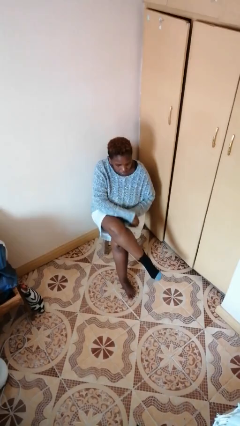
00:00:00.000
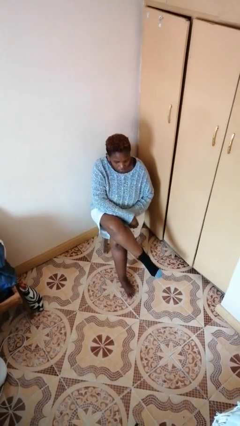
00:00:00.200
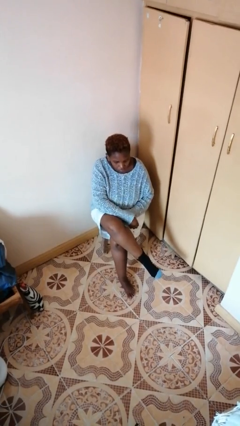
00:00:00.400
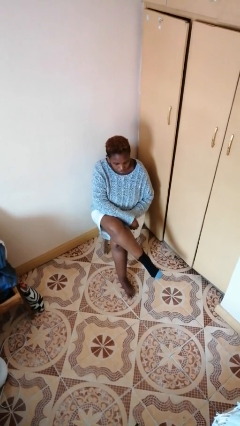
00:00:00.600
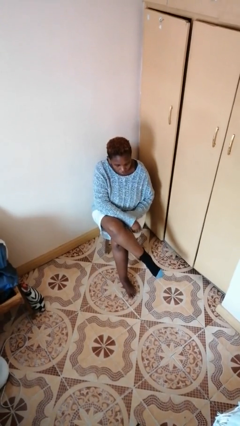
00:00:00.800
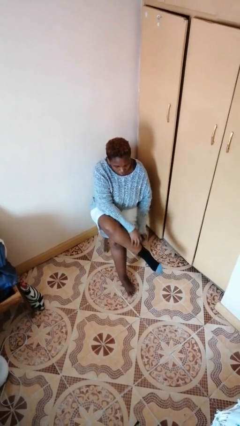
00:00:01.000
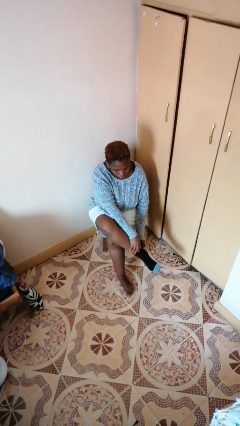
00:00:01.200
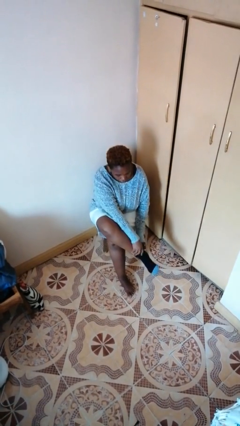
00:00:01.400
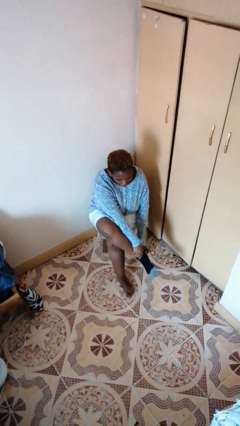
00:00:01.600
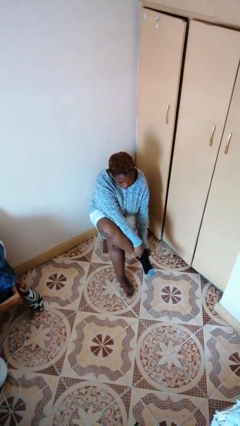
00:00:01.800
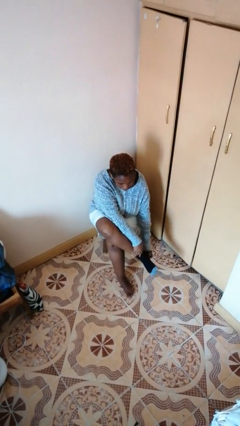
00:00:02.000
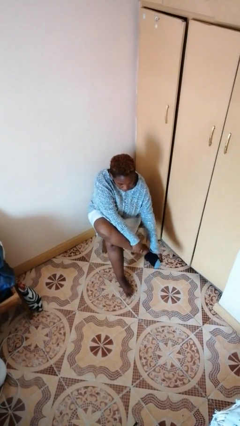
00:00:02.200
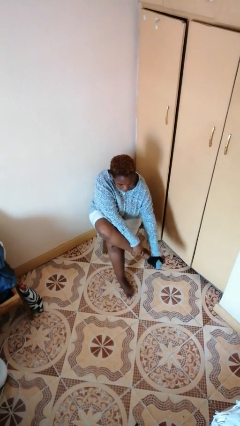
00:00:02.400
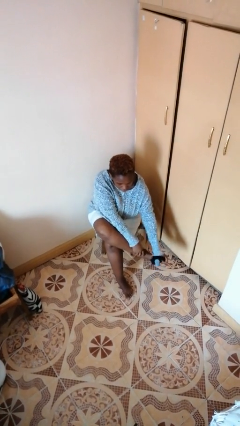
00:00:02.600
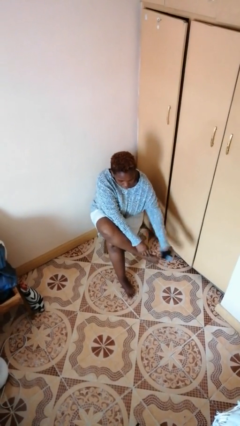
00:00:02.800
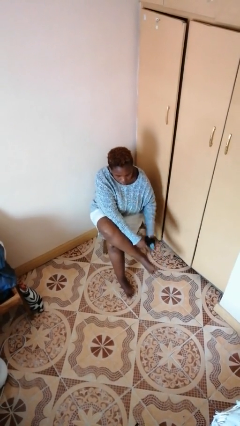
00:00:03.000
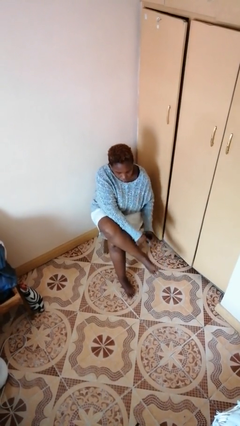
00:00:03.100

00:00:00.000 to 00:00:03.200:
person takes off socks

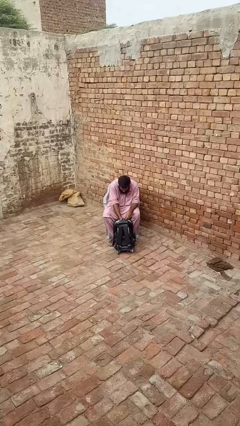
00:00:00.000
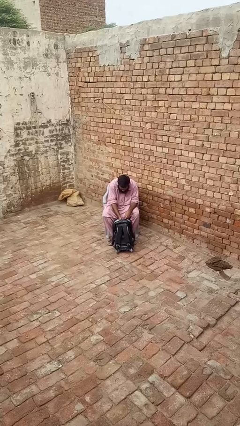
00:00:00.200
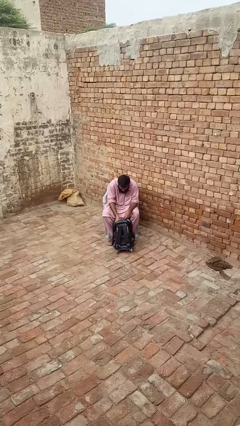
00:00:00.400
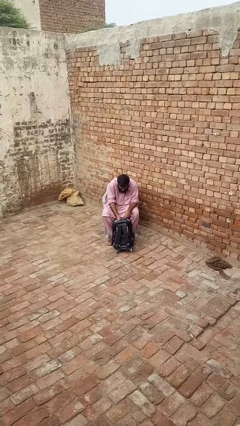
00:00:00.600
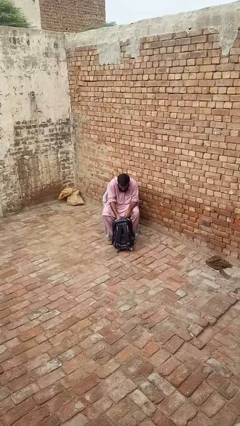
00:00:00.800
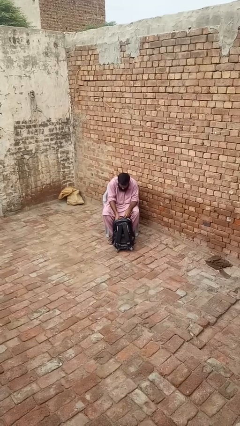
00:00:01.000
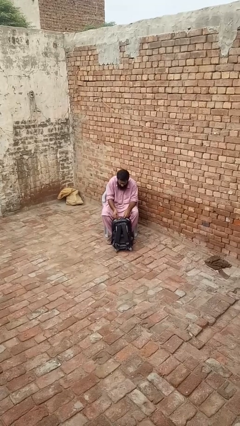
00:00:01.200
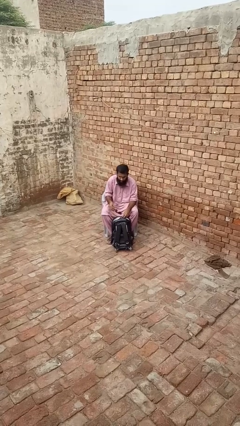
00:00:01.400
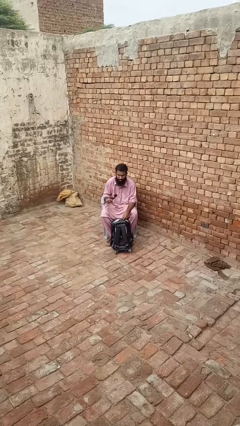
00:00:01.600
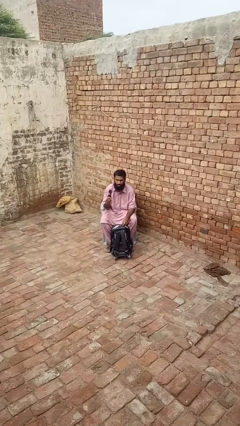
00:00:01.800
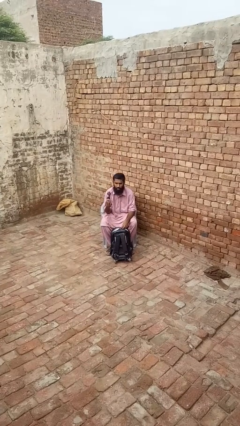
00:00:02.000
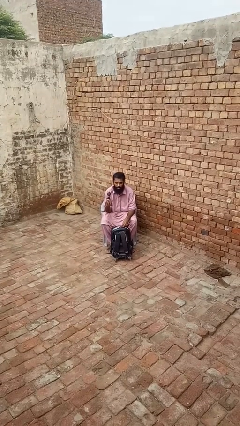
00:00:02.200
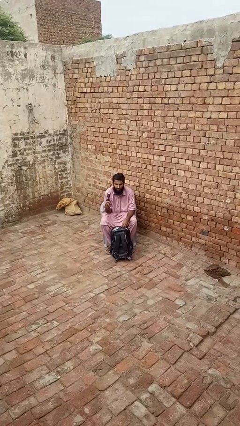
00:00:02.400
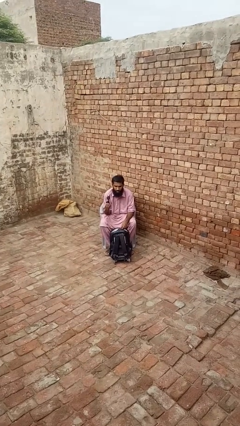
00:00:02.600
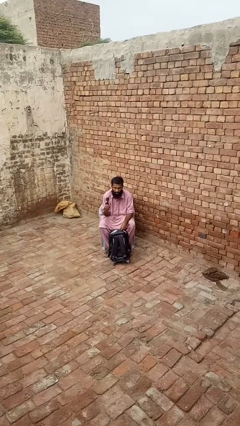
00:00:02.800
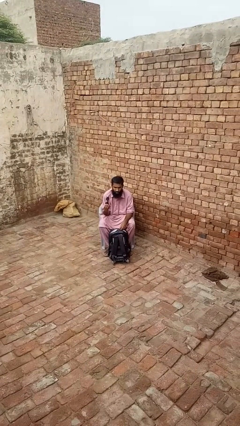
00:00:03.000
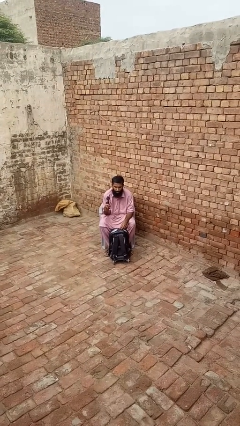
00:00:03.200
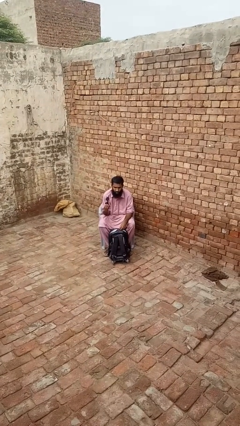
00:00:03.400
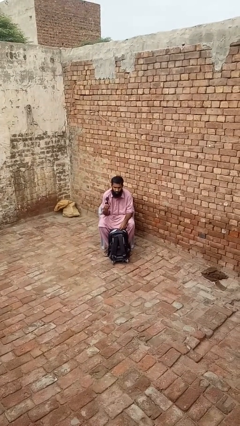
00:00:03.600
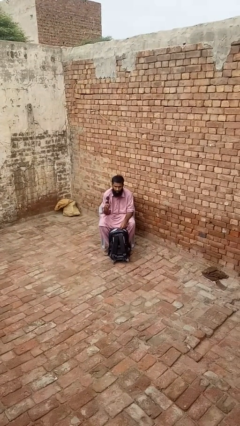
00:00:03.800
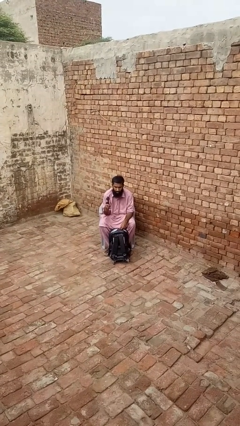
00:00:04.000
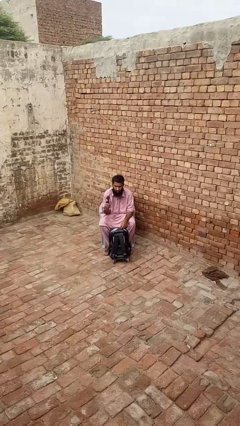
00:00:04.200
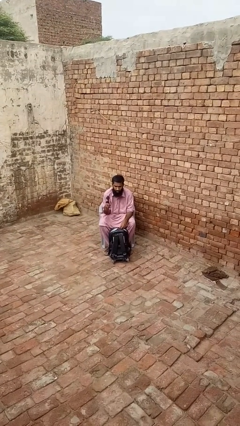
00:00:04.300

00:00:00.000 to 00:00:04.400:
person takes object from backpack

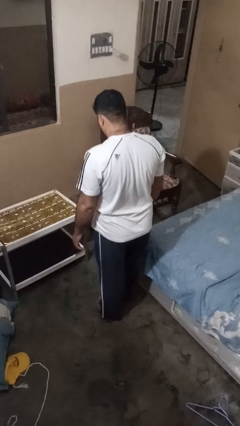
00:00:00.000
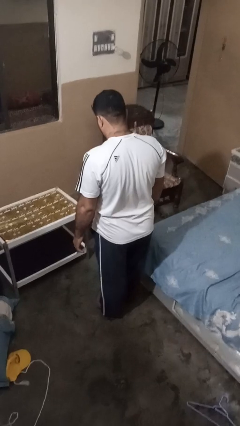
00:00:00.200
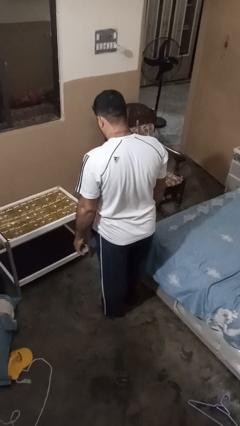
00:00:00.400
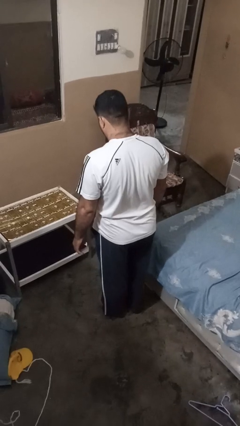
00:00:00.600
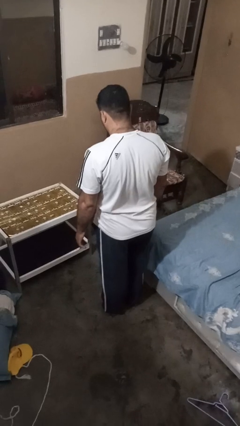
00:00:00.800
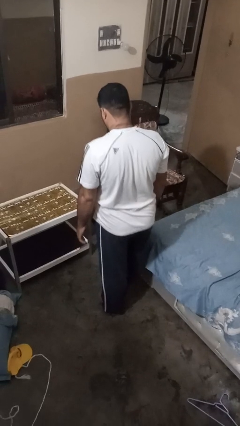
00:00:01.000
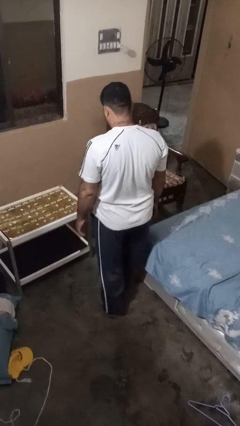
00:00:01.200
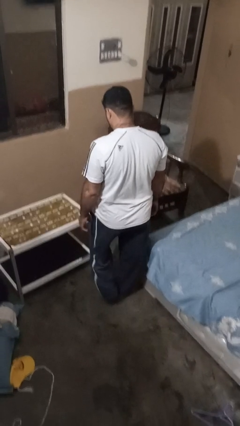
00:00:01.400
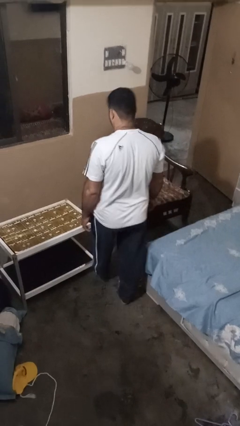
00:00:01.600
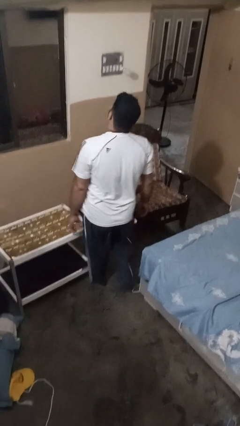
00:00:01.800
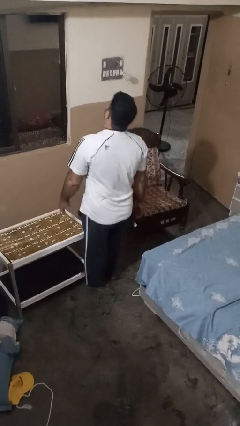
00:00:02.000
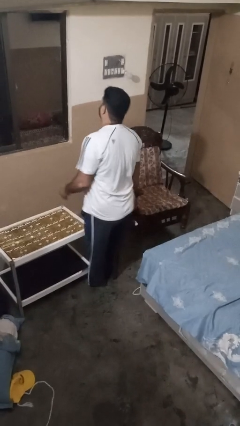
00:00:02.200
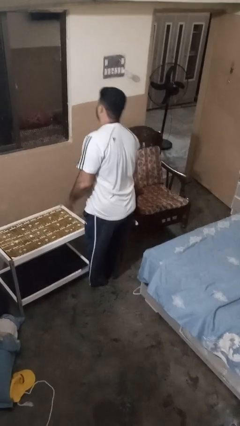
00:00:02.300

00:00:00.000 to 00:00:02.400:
person bumps into table

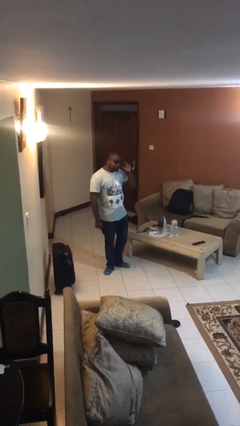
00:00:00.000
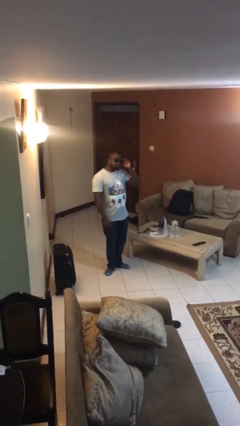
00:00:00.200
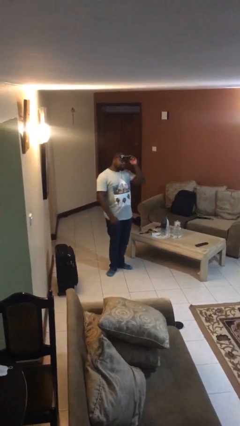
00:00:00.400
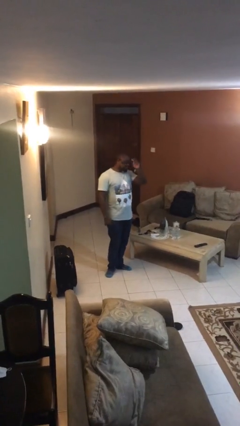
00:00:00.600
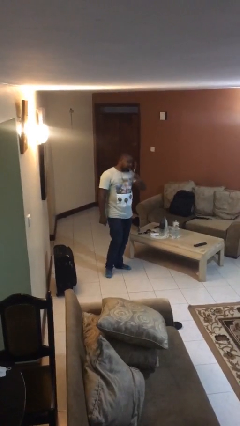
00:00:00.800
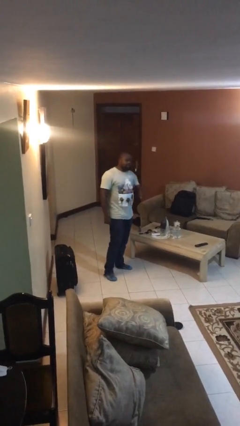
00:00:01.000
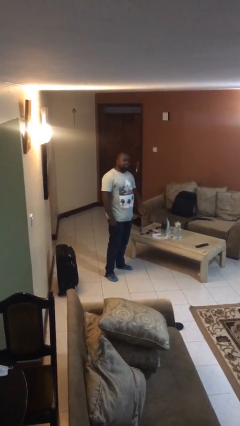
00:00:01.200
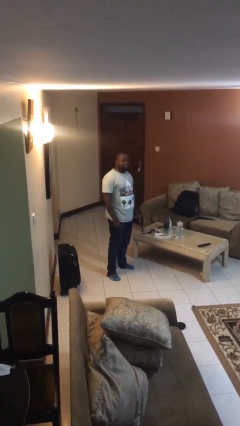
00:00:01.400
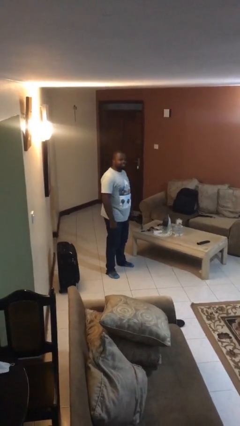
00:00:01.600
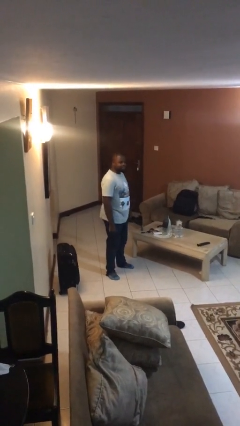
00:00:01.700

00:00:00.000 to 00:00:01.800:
person takes off sunglasses

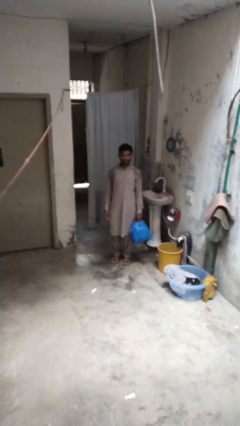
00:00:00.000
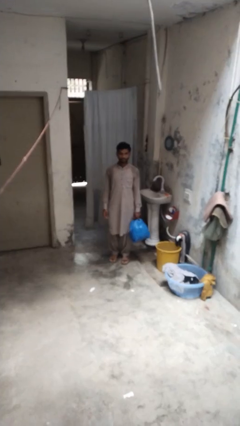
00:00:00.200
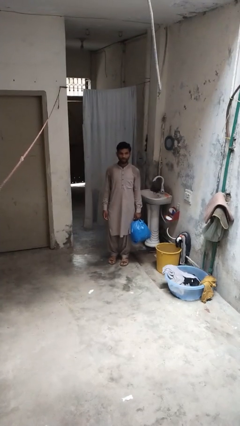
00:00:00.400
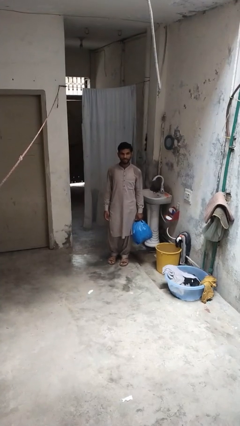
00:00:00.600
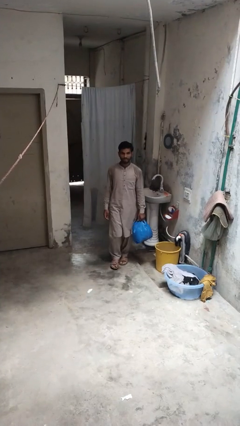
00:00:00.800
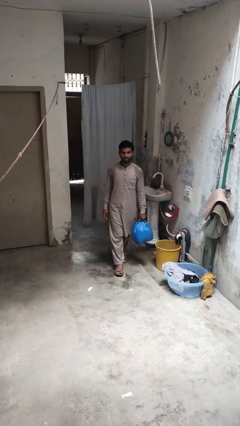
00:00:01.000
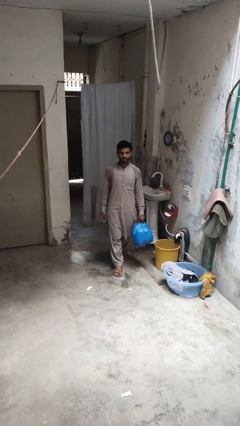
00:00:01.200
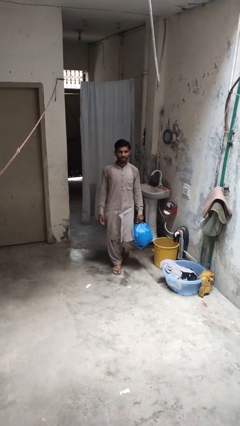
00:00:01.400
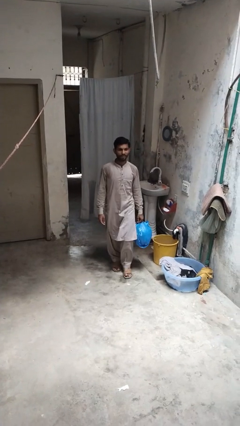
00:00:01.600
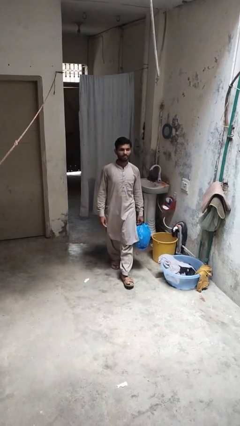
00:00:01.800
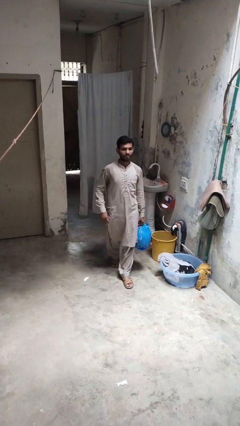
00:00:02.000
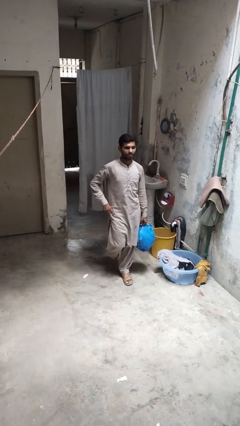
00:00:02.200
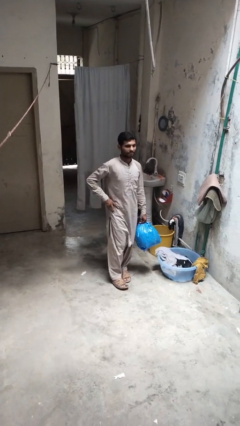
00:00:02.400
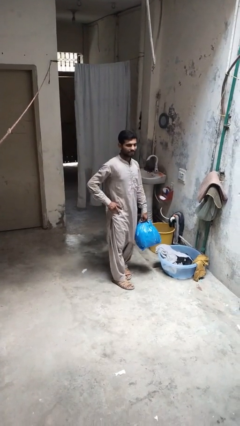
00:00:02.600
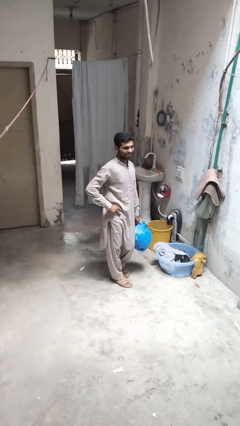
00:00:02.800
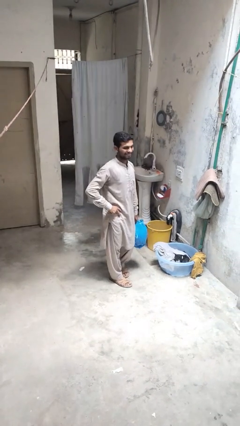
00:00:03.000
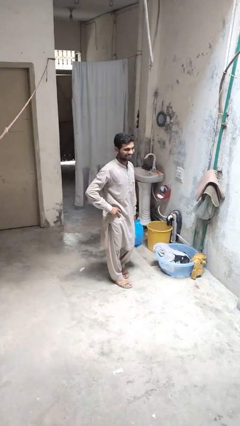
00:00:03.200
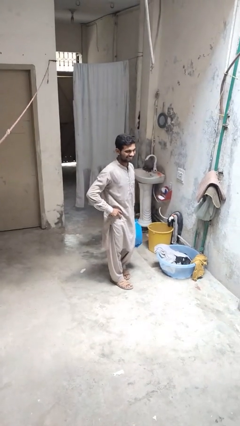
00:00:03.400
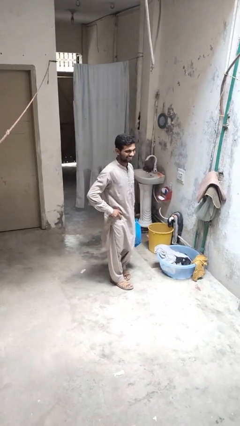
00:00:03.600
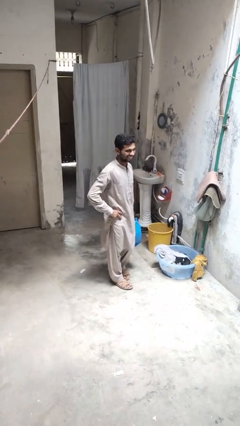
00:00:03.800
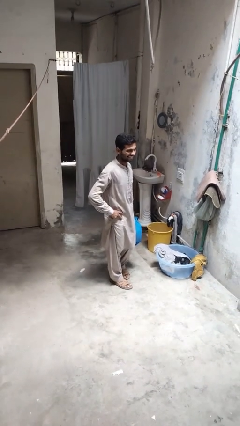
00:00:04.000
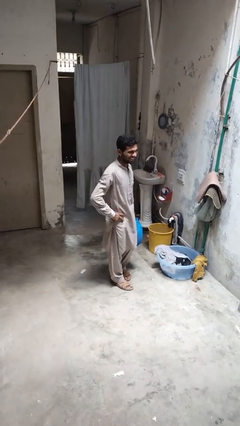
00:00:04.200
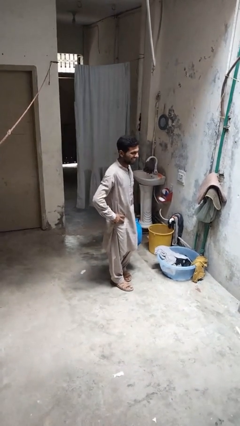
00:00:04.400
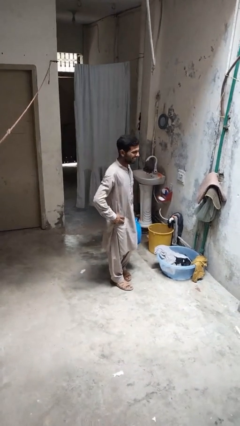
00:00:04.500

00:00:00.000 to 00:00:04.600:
person carries groceries

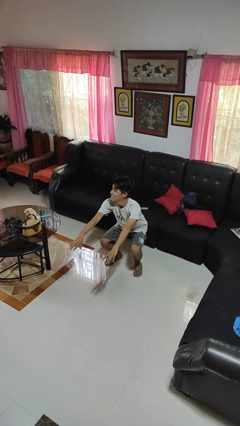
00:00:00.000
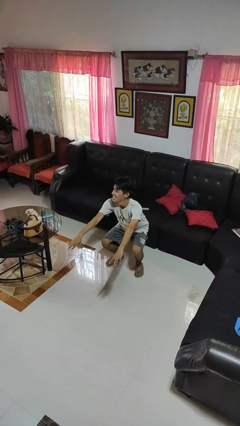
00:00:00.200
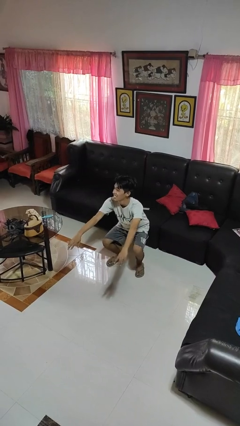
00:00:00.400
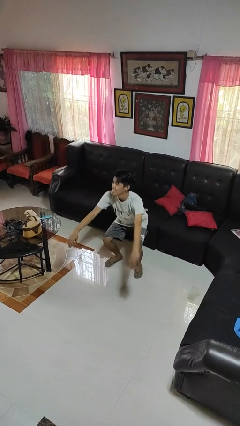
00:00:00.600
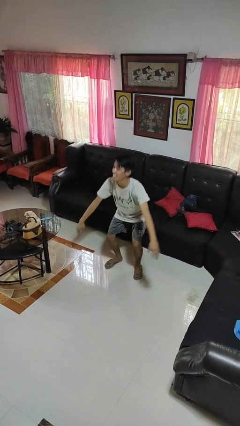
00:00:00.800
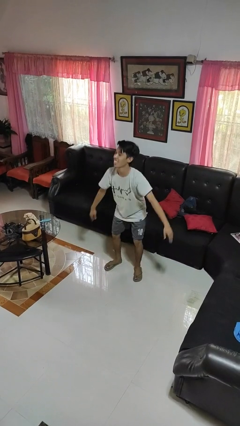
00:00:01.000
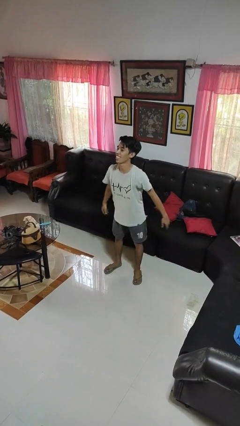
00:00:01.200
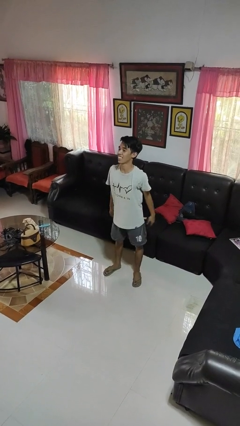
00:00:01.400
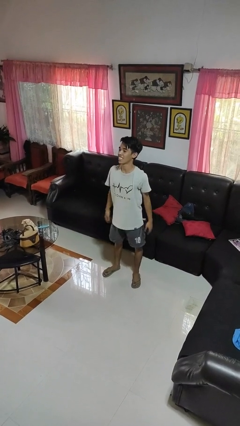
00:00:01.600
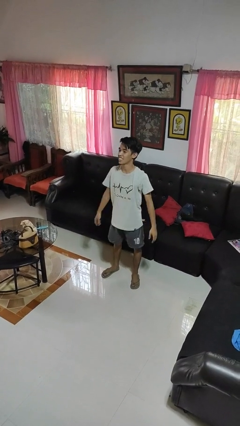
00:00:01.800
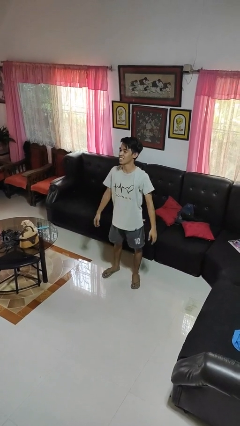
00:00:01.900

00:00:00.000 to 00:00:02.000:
person stands up
